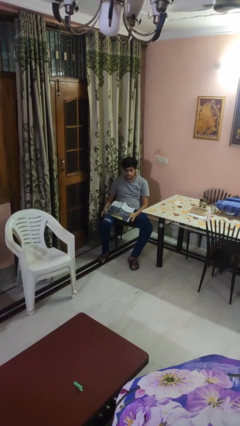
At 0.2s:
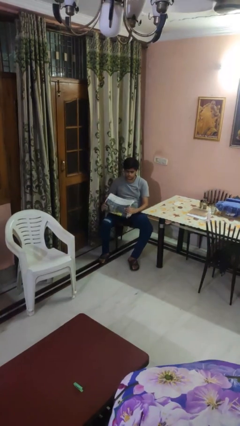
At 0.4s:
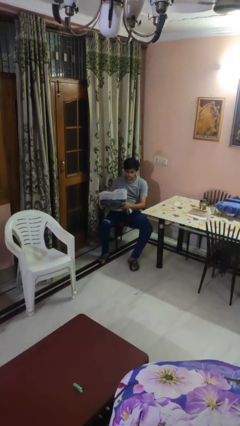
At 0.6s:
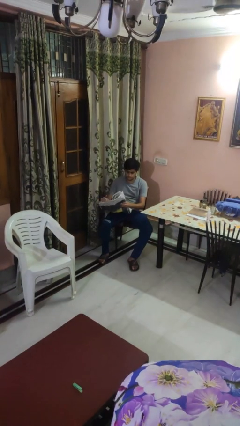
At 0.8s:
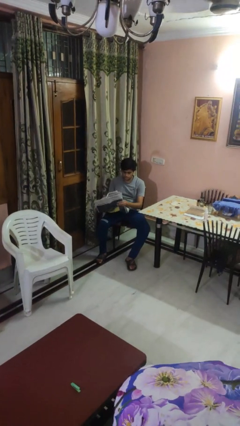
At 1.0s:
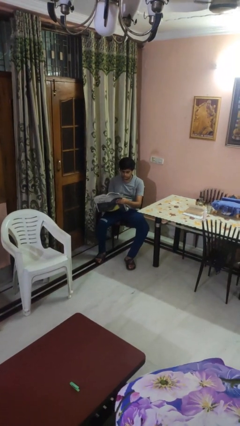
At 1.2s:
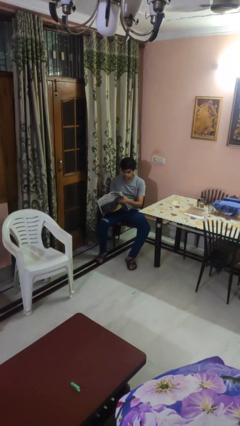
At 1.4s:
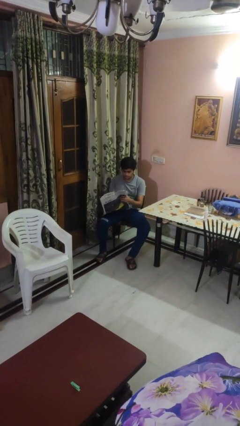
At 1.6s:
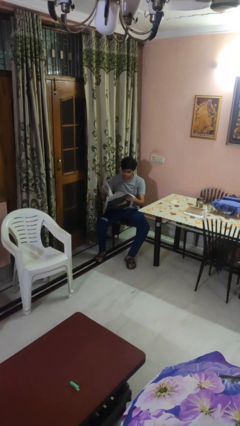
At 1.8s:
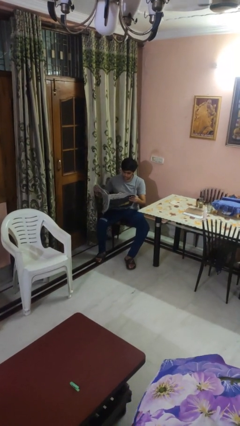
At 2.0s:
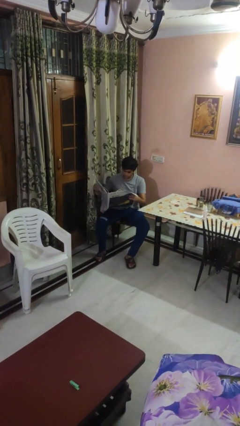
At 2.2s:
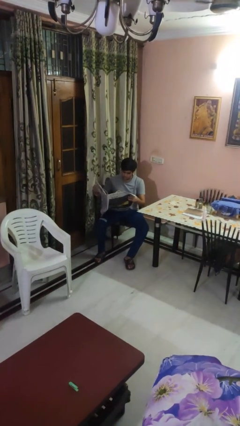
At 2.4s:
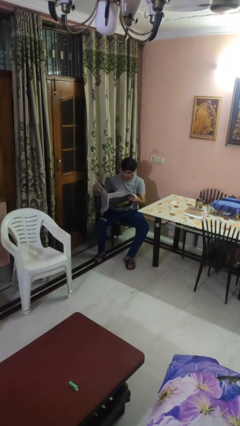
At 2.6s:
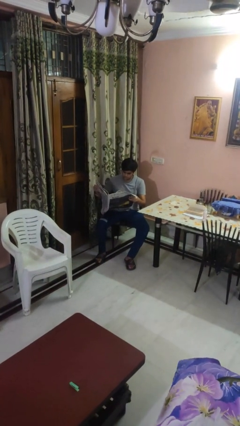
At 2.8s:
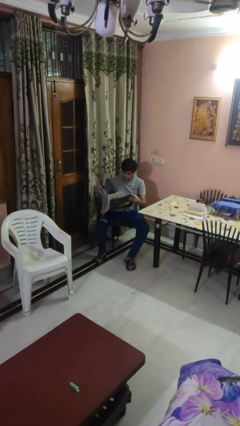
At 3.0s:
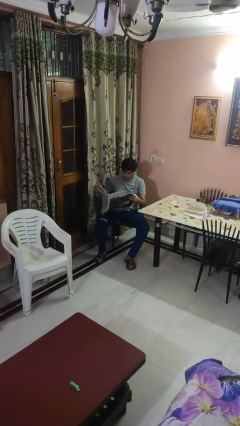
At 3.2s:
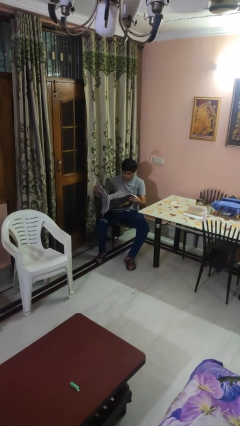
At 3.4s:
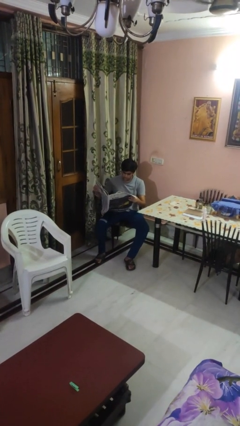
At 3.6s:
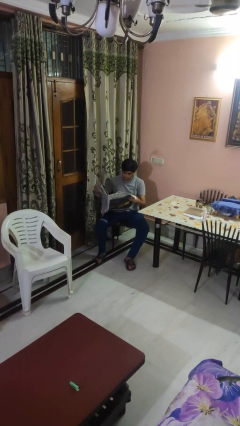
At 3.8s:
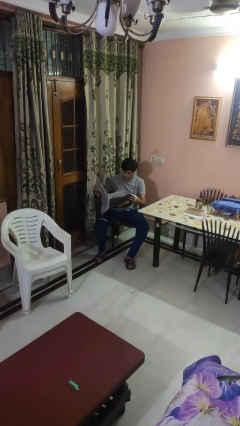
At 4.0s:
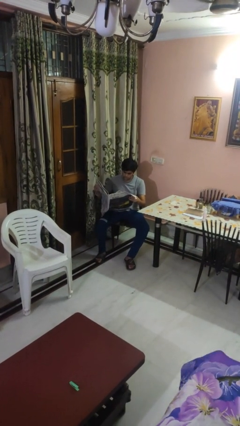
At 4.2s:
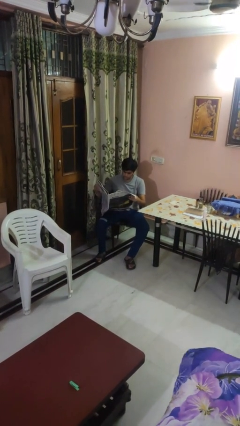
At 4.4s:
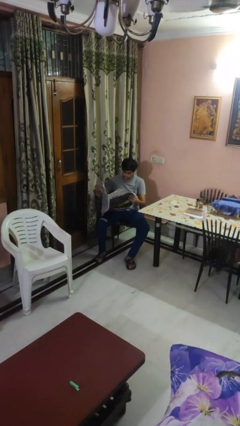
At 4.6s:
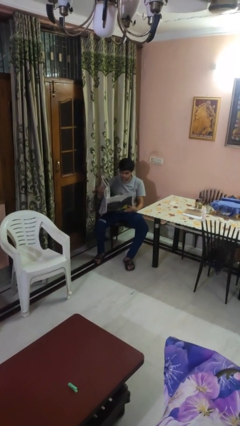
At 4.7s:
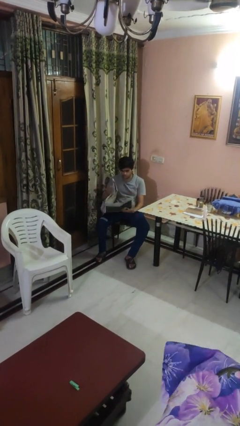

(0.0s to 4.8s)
person reads newspaper

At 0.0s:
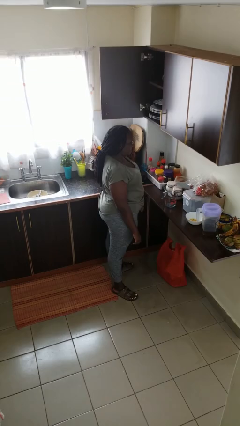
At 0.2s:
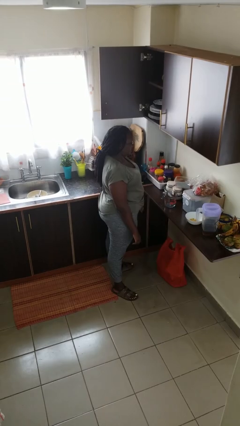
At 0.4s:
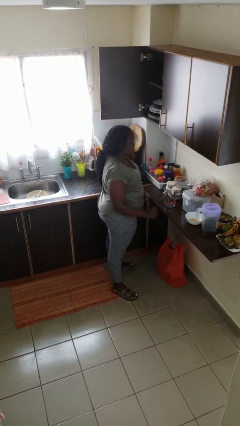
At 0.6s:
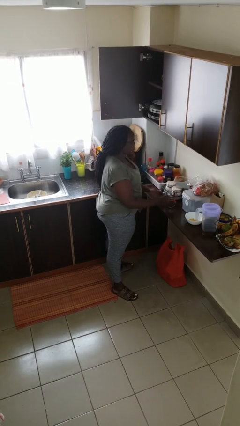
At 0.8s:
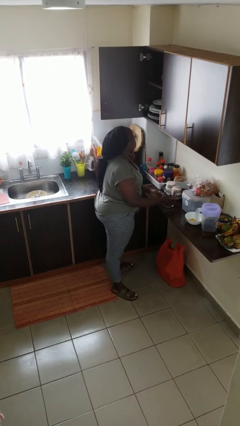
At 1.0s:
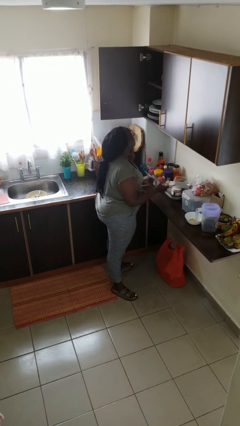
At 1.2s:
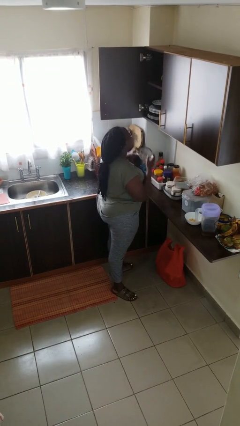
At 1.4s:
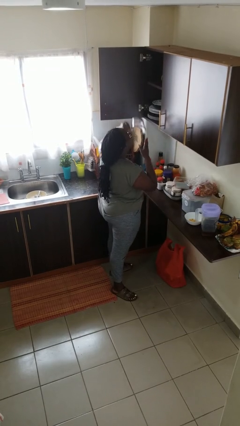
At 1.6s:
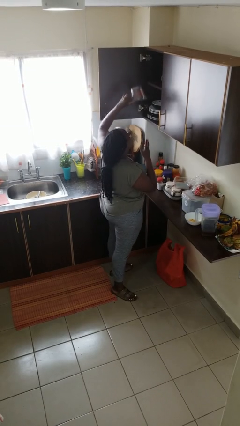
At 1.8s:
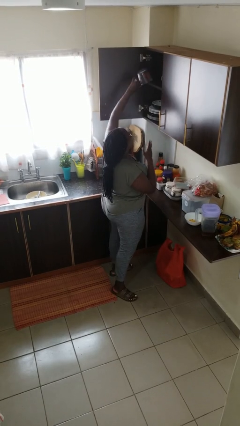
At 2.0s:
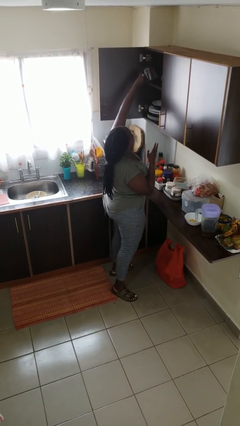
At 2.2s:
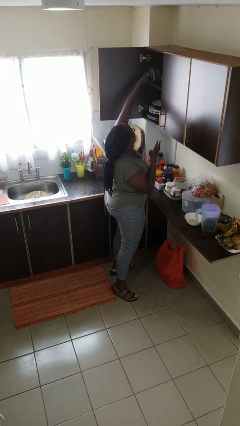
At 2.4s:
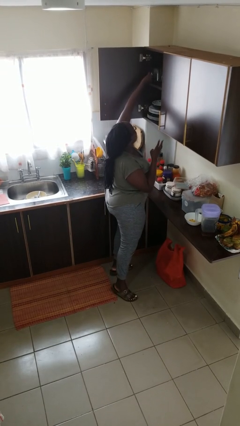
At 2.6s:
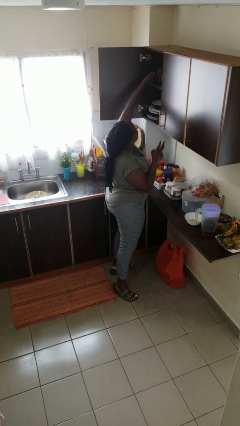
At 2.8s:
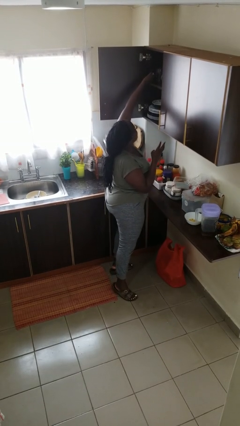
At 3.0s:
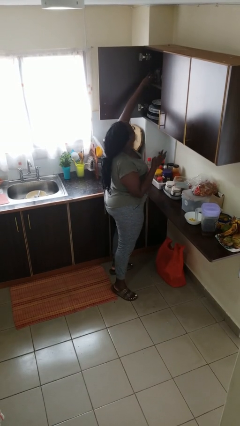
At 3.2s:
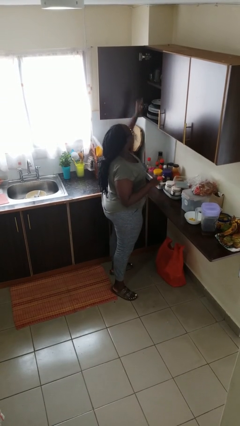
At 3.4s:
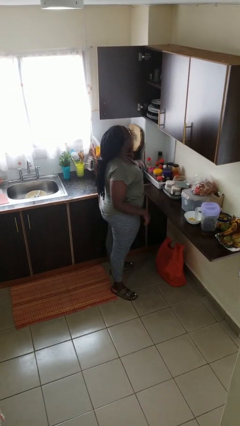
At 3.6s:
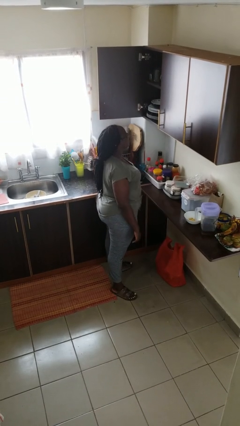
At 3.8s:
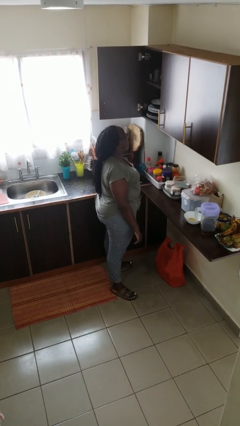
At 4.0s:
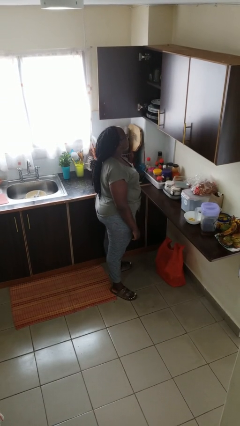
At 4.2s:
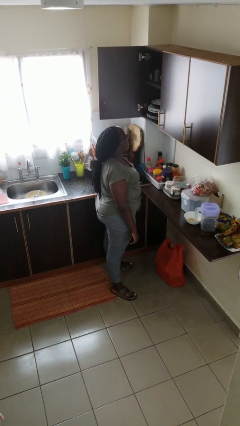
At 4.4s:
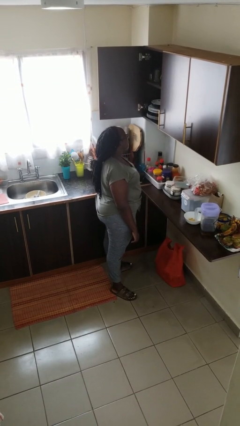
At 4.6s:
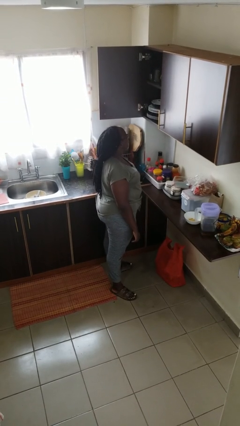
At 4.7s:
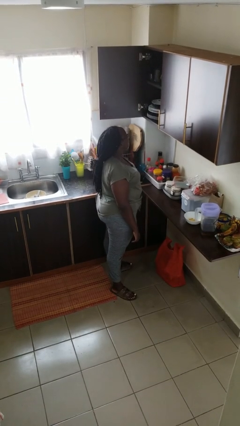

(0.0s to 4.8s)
person puts object in cabinet

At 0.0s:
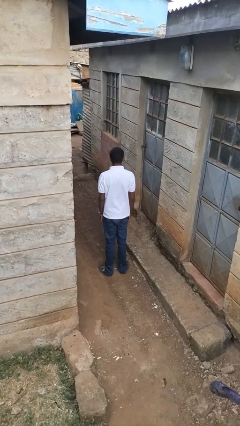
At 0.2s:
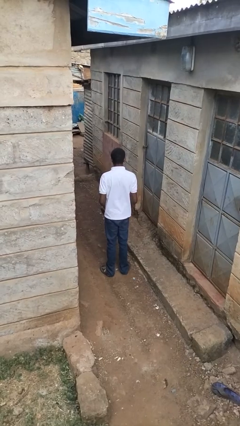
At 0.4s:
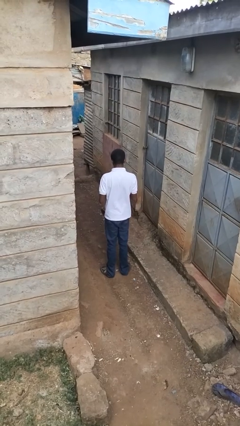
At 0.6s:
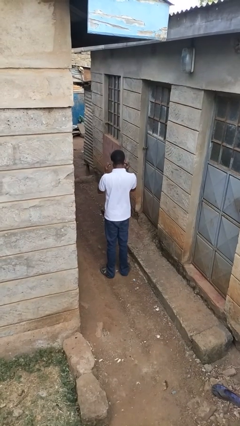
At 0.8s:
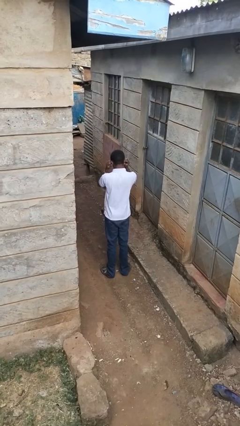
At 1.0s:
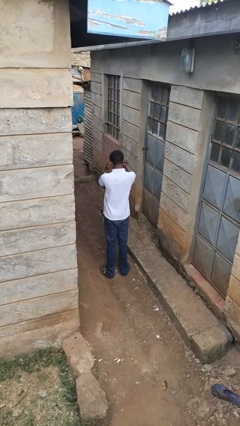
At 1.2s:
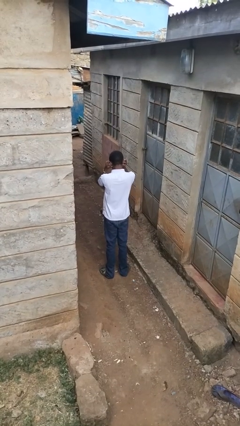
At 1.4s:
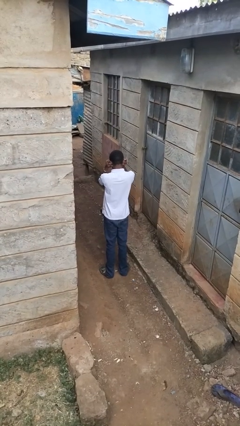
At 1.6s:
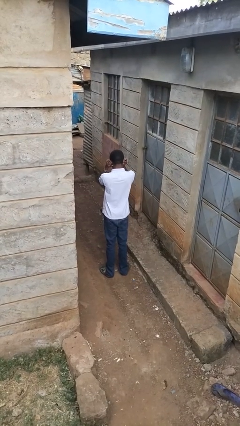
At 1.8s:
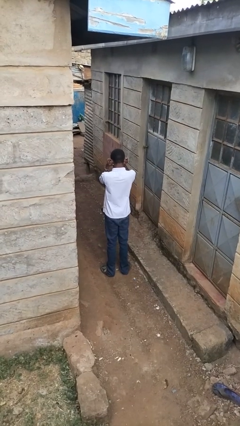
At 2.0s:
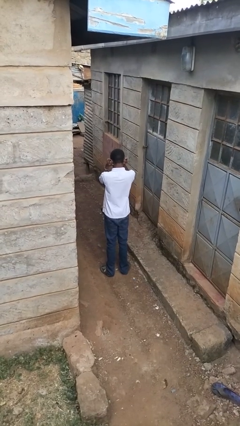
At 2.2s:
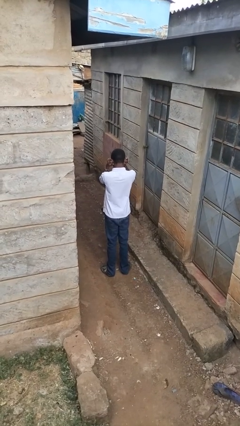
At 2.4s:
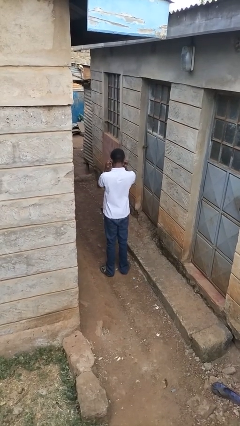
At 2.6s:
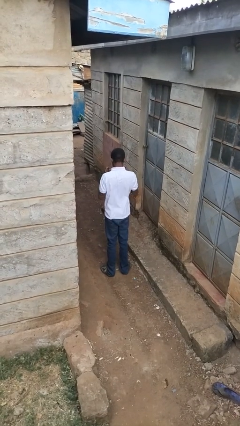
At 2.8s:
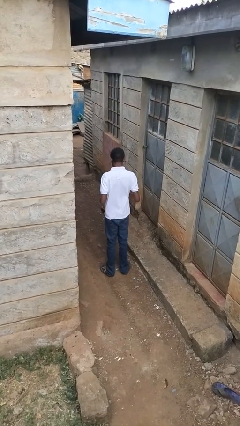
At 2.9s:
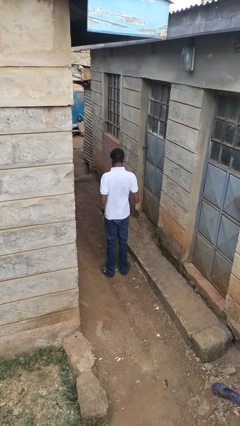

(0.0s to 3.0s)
person puts fingers in ear

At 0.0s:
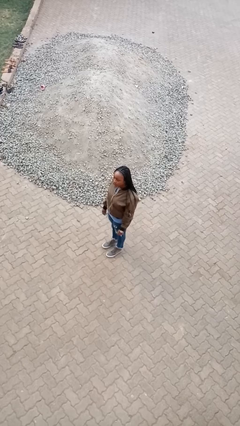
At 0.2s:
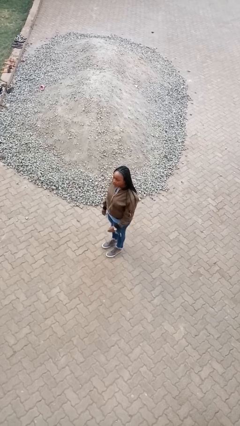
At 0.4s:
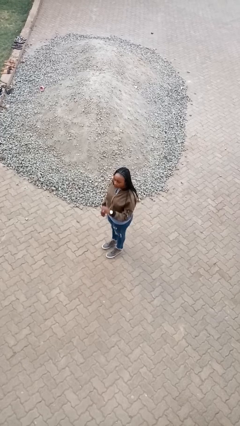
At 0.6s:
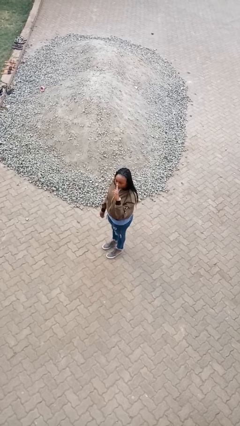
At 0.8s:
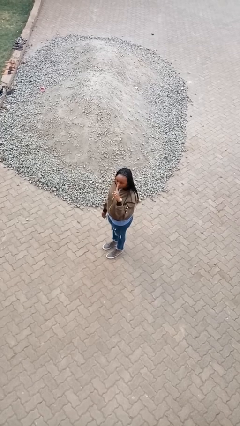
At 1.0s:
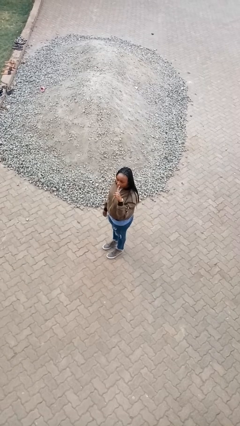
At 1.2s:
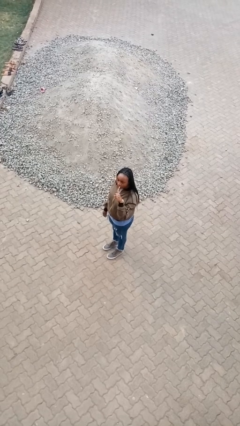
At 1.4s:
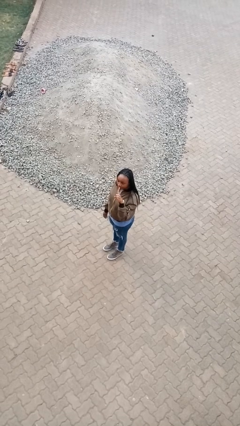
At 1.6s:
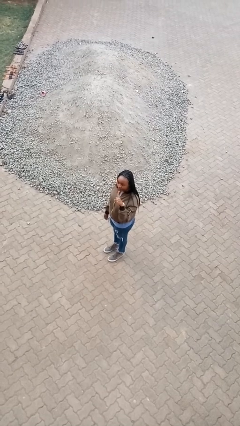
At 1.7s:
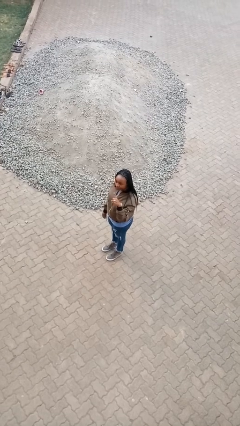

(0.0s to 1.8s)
person gestures number one

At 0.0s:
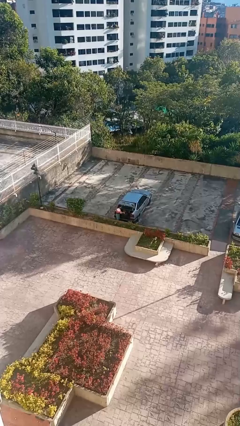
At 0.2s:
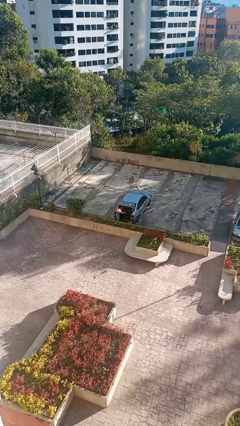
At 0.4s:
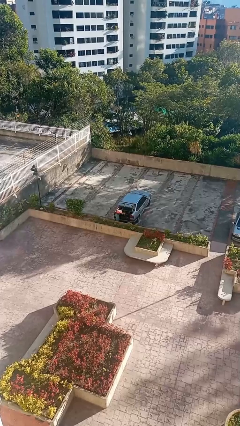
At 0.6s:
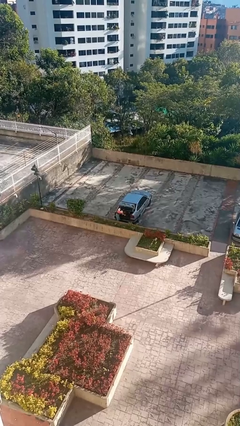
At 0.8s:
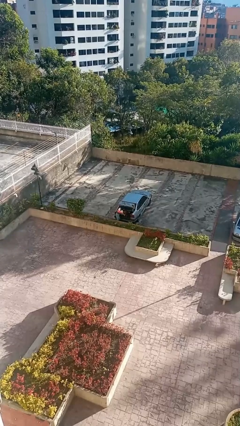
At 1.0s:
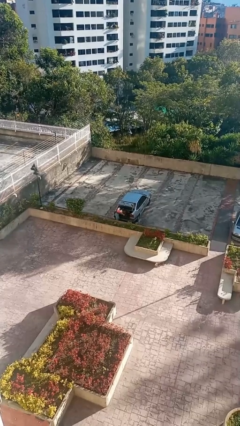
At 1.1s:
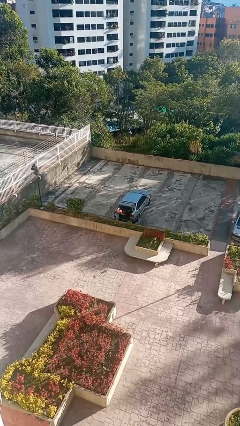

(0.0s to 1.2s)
person loads car

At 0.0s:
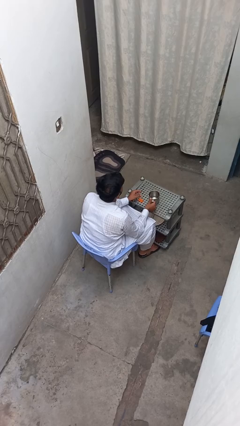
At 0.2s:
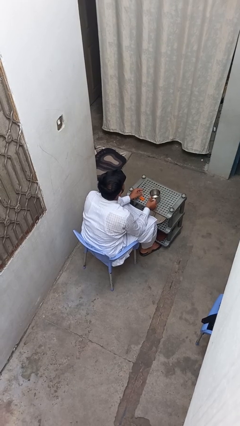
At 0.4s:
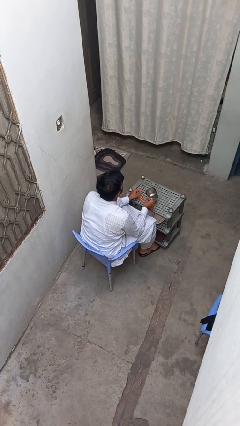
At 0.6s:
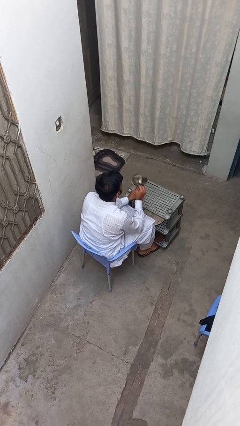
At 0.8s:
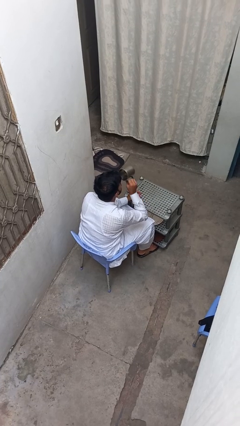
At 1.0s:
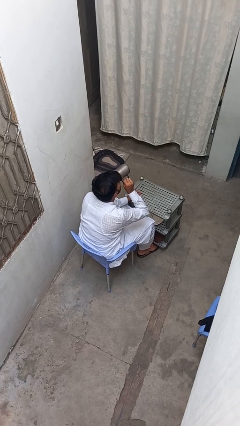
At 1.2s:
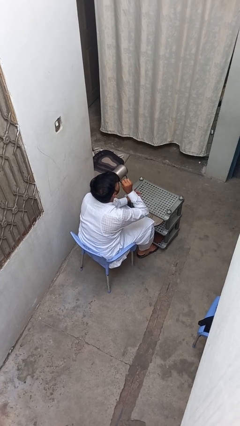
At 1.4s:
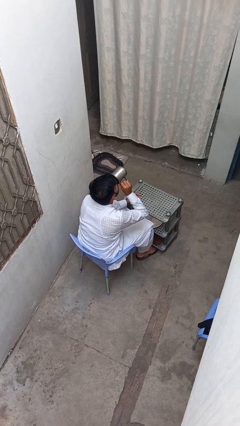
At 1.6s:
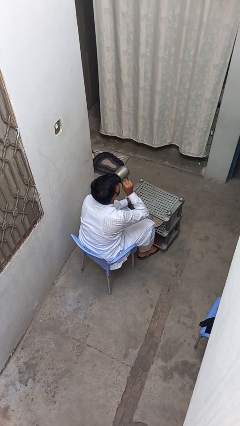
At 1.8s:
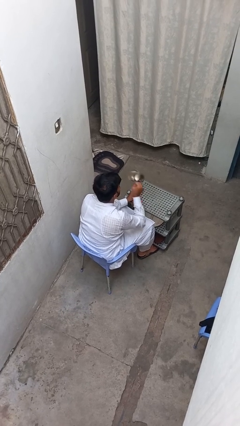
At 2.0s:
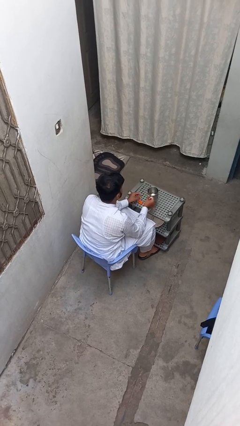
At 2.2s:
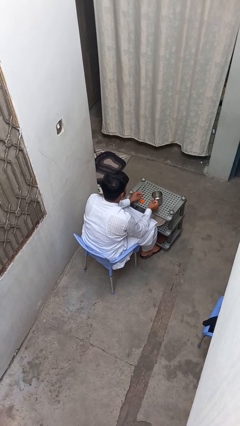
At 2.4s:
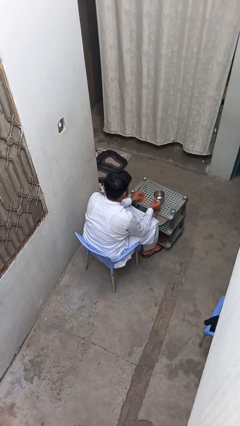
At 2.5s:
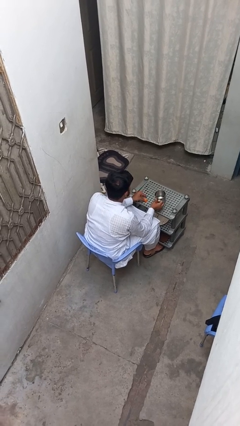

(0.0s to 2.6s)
person drinks from cup
